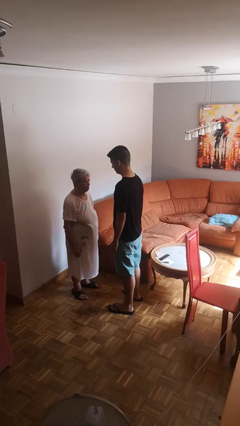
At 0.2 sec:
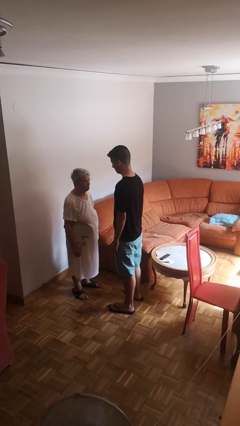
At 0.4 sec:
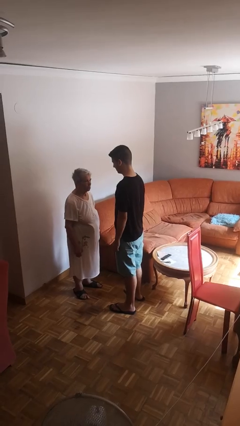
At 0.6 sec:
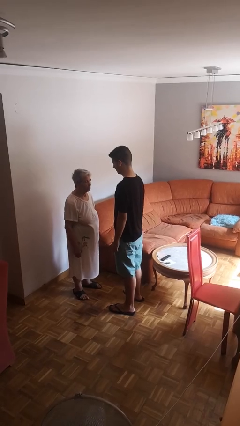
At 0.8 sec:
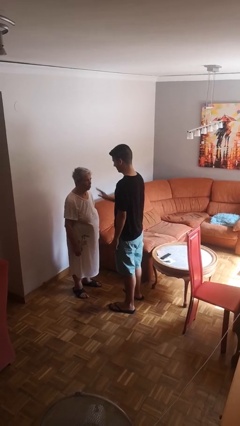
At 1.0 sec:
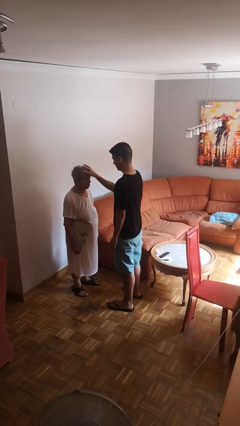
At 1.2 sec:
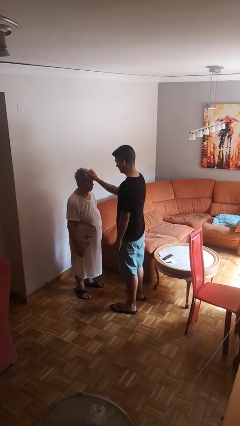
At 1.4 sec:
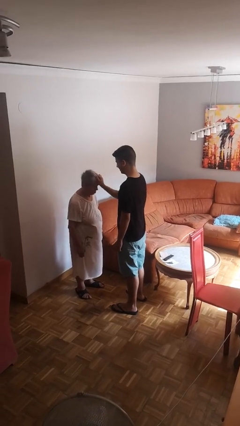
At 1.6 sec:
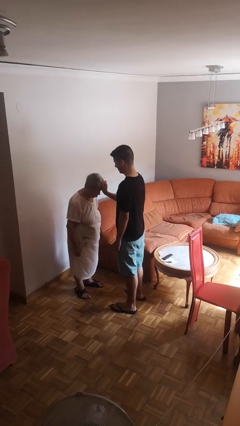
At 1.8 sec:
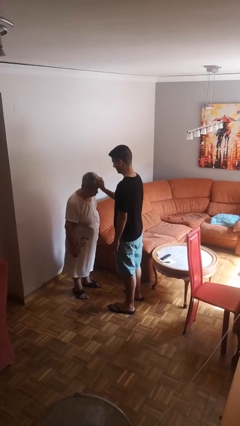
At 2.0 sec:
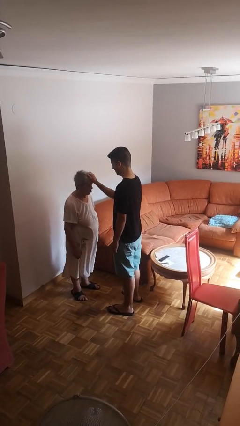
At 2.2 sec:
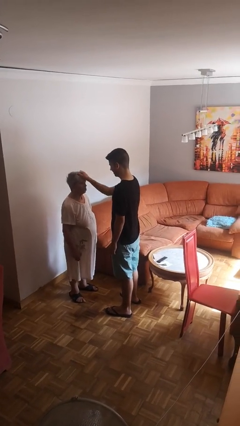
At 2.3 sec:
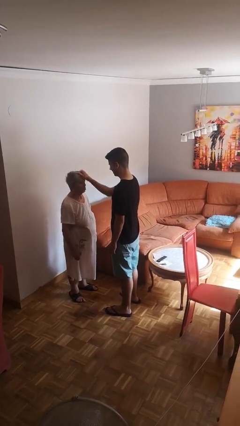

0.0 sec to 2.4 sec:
person grabs person by hair

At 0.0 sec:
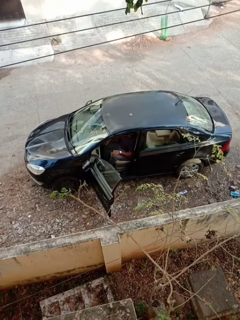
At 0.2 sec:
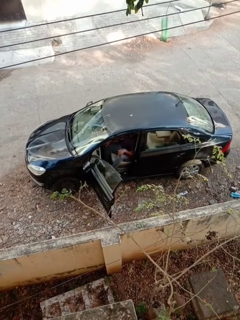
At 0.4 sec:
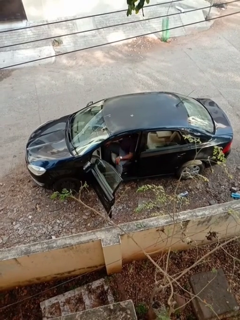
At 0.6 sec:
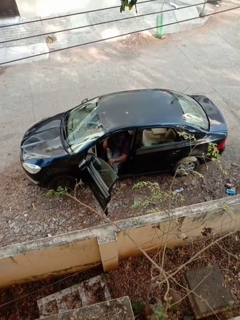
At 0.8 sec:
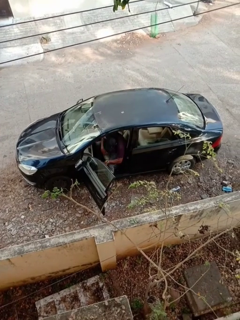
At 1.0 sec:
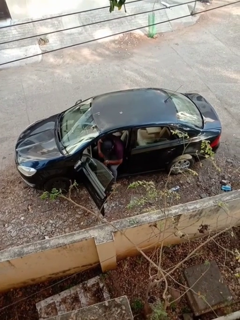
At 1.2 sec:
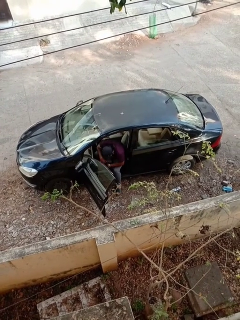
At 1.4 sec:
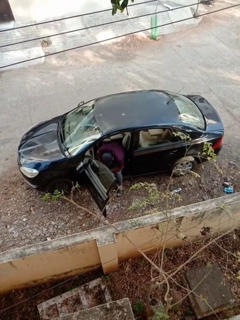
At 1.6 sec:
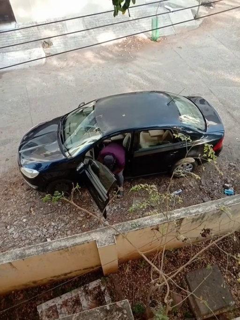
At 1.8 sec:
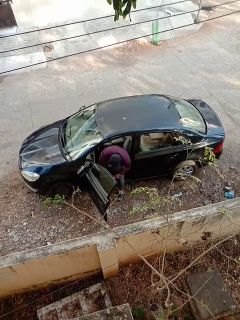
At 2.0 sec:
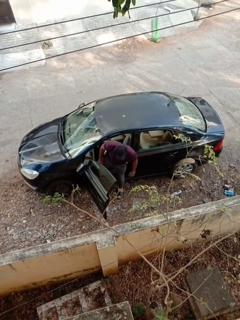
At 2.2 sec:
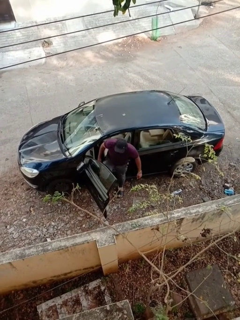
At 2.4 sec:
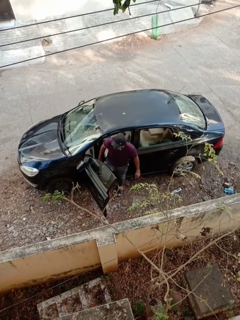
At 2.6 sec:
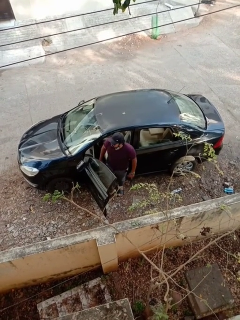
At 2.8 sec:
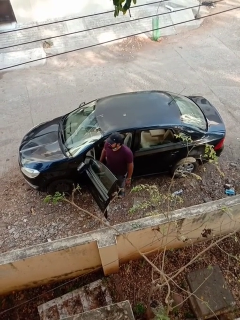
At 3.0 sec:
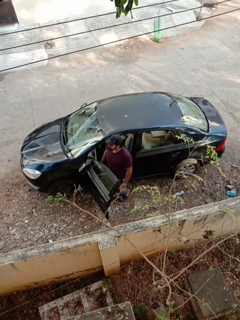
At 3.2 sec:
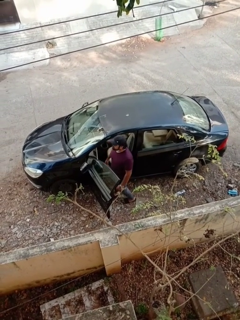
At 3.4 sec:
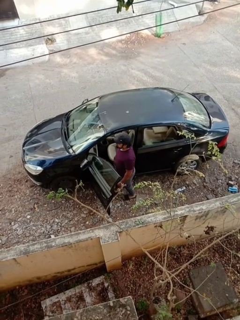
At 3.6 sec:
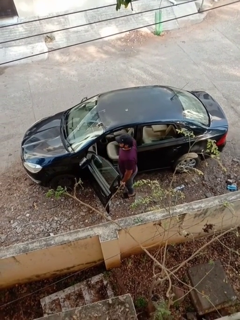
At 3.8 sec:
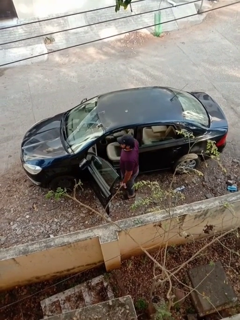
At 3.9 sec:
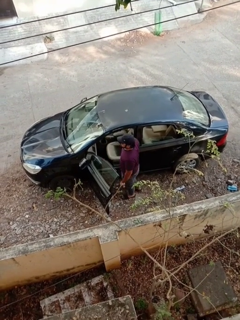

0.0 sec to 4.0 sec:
person exits car

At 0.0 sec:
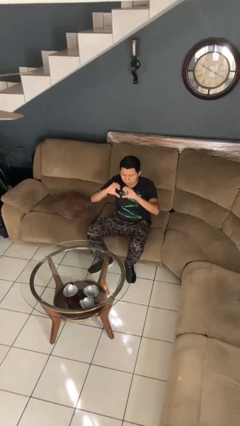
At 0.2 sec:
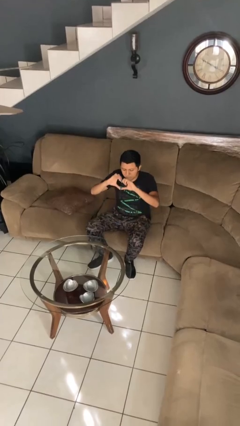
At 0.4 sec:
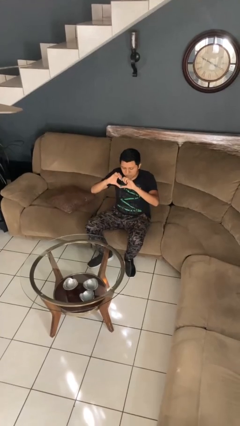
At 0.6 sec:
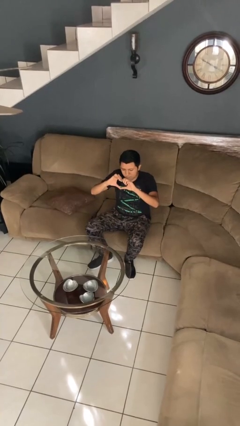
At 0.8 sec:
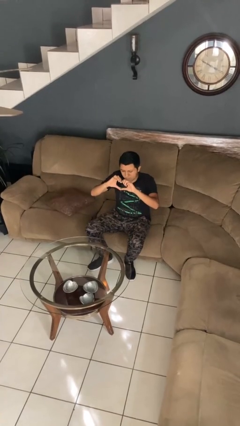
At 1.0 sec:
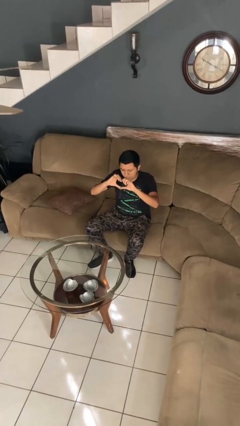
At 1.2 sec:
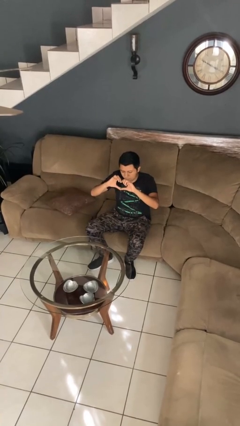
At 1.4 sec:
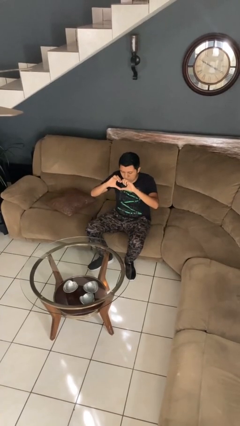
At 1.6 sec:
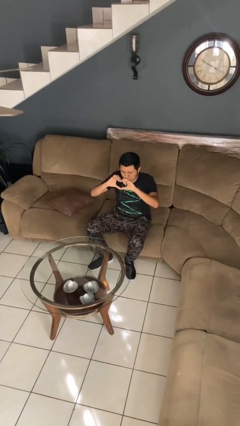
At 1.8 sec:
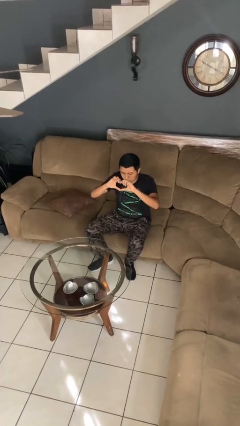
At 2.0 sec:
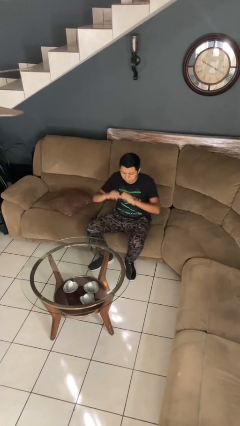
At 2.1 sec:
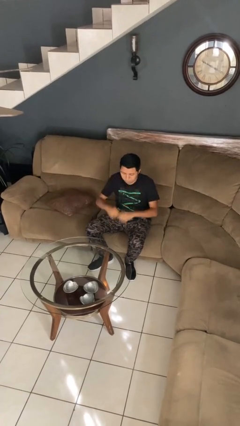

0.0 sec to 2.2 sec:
person gestures heart

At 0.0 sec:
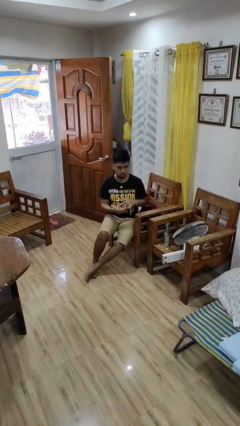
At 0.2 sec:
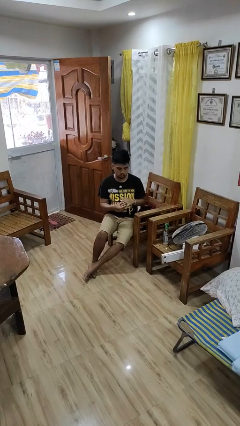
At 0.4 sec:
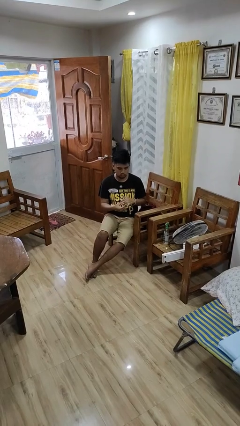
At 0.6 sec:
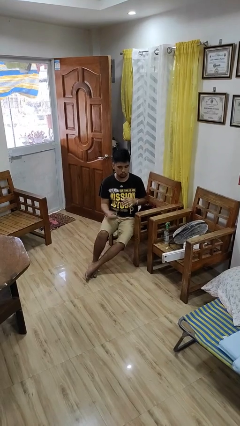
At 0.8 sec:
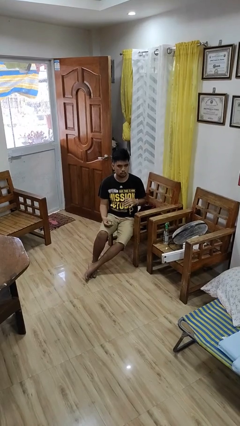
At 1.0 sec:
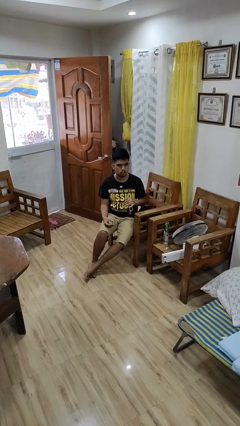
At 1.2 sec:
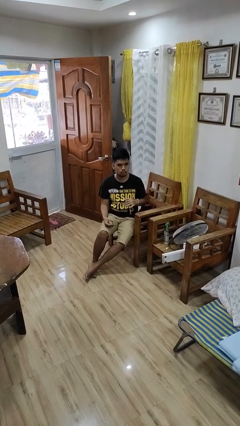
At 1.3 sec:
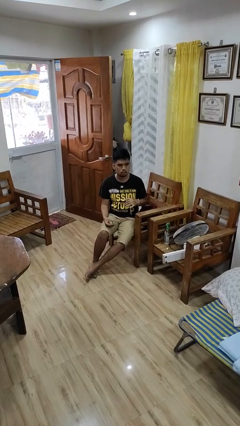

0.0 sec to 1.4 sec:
person takes off ring

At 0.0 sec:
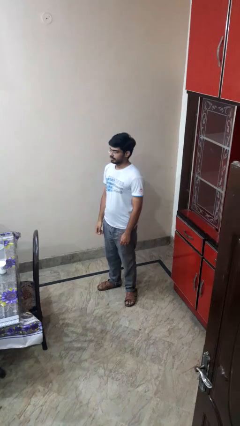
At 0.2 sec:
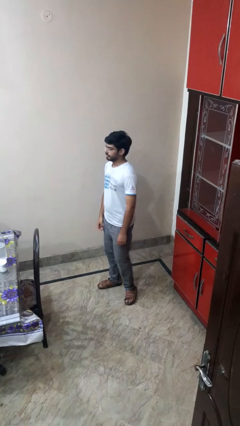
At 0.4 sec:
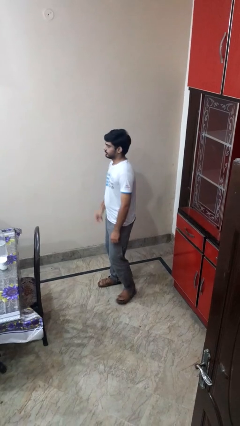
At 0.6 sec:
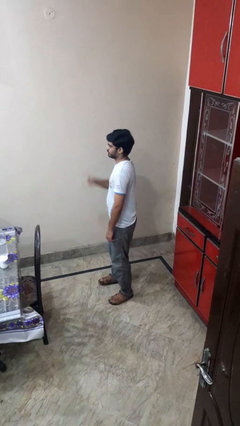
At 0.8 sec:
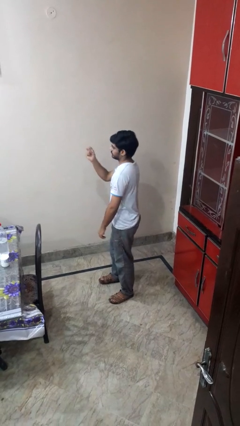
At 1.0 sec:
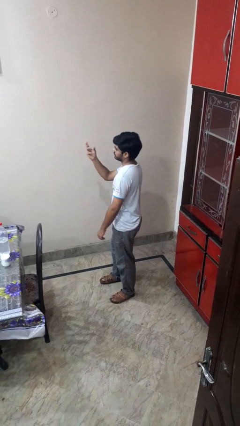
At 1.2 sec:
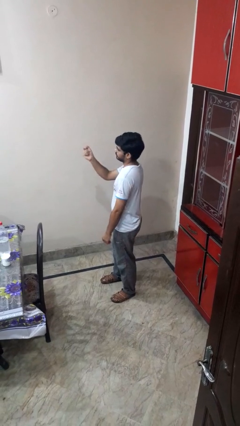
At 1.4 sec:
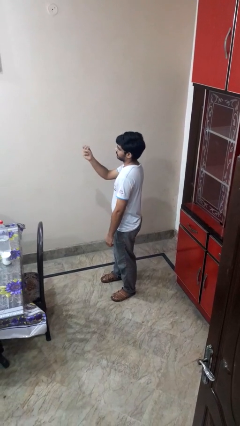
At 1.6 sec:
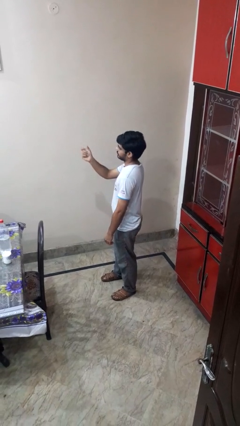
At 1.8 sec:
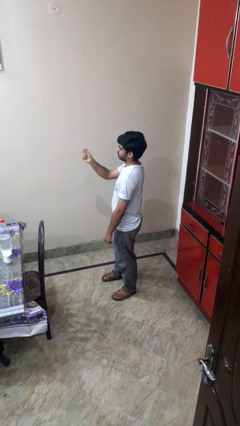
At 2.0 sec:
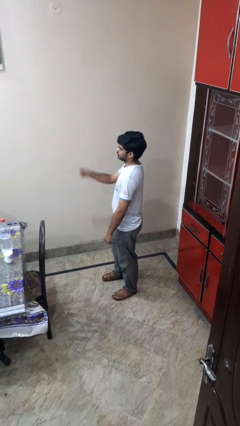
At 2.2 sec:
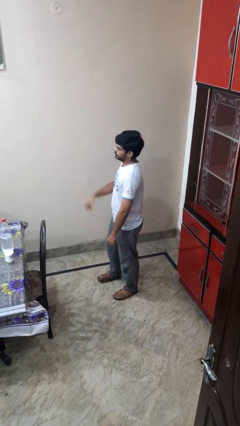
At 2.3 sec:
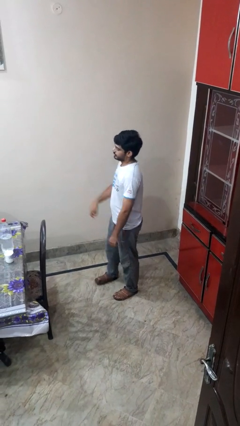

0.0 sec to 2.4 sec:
person snaps fingers

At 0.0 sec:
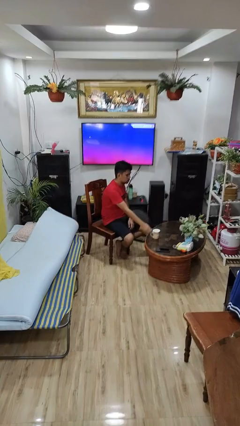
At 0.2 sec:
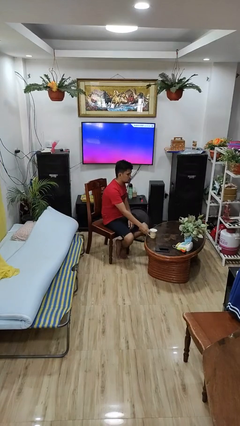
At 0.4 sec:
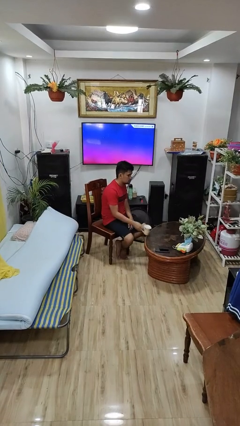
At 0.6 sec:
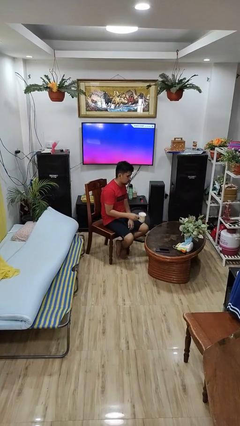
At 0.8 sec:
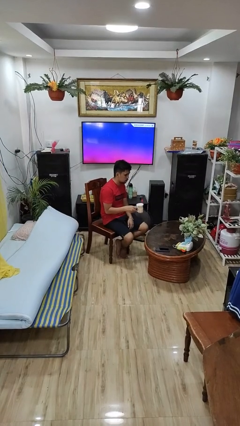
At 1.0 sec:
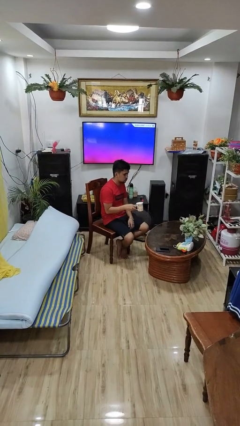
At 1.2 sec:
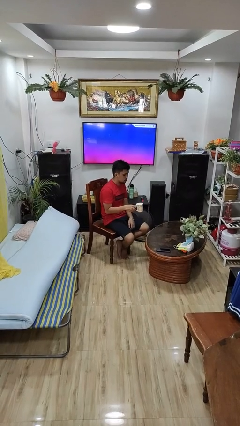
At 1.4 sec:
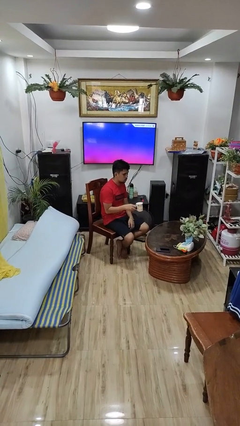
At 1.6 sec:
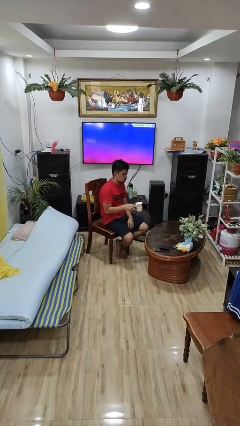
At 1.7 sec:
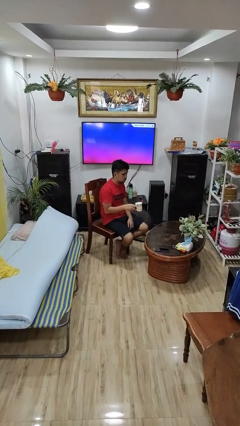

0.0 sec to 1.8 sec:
person picks up object from table

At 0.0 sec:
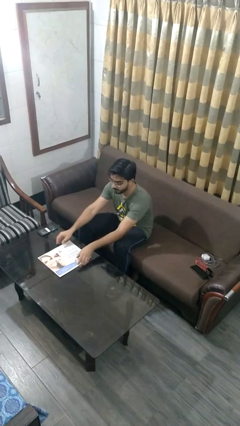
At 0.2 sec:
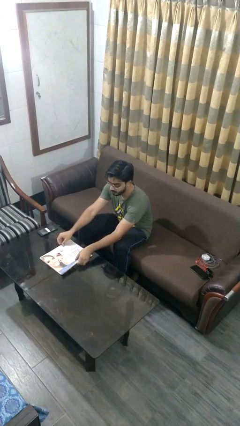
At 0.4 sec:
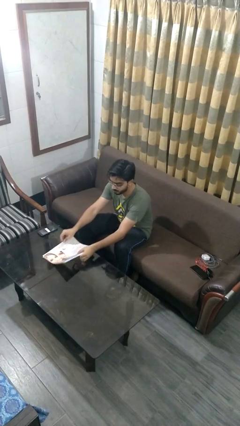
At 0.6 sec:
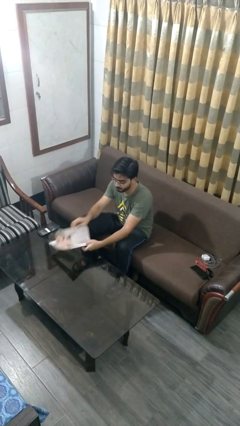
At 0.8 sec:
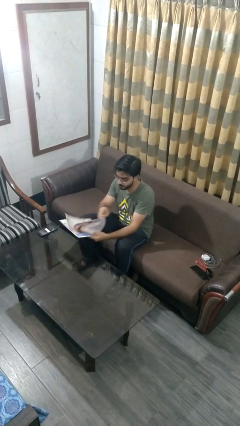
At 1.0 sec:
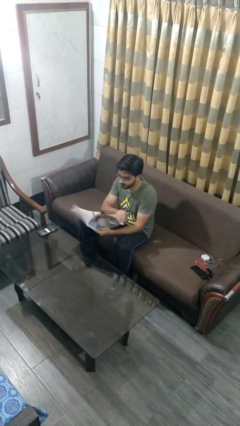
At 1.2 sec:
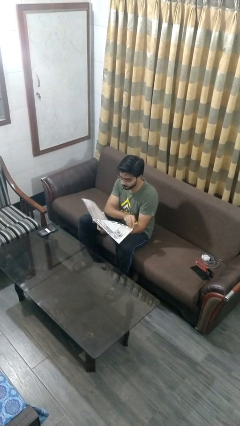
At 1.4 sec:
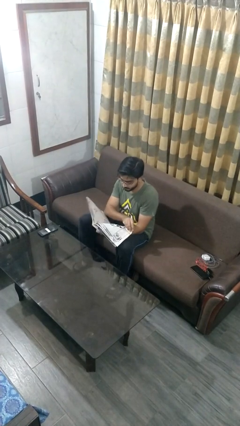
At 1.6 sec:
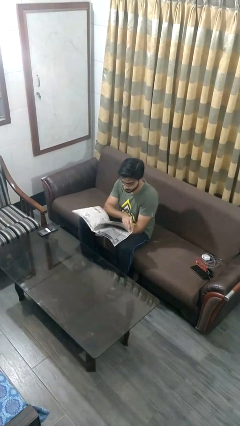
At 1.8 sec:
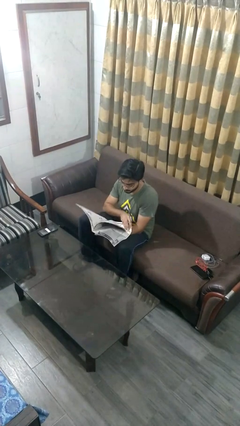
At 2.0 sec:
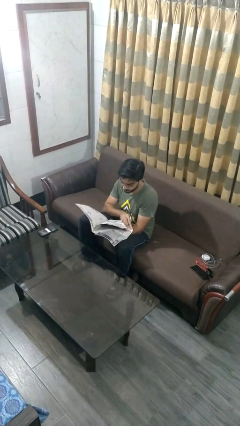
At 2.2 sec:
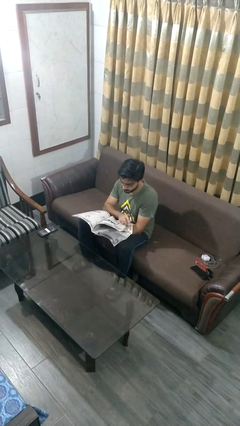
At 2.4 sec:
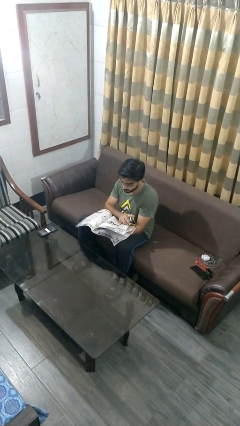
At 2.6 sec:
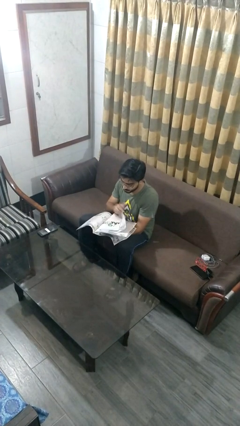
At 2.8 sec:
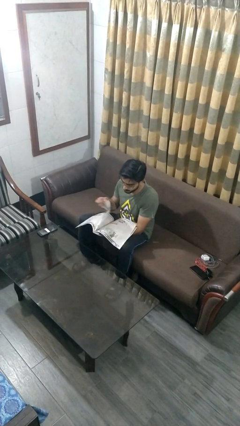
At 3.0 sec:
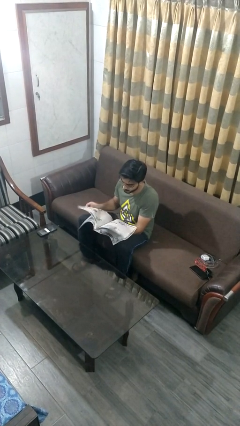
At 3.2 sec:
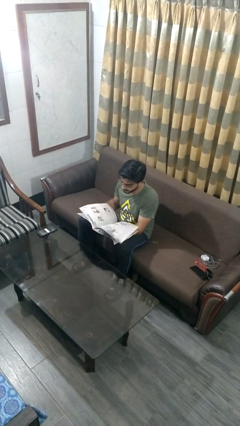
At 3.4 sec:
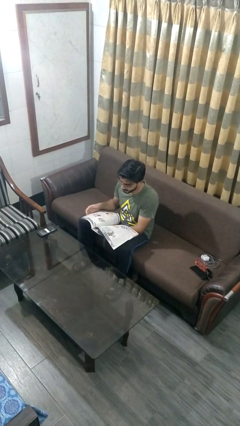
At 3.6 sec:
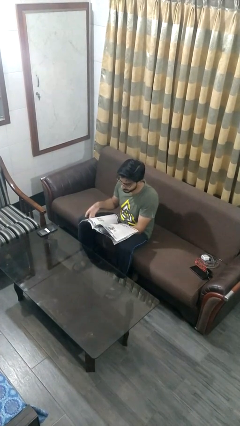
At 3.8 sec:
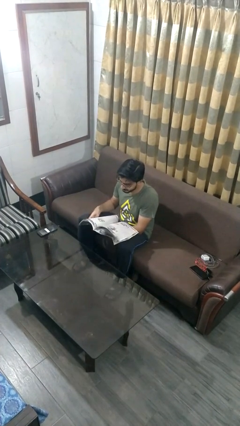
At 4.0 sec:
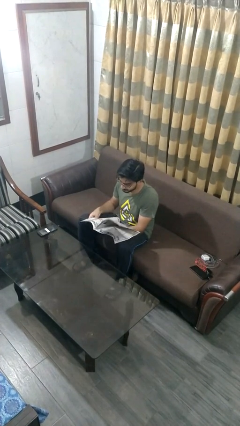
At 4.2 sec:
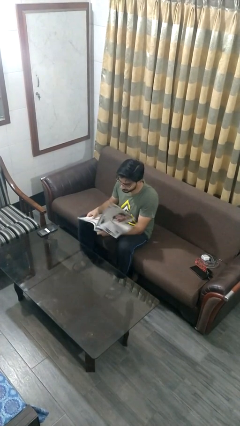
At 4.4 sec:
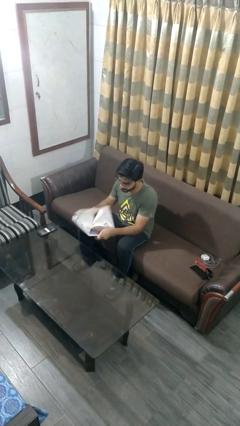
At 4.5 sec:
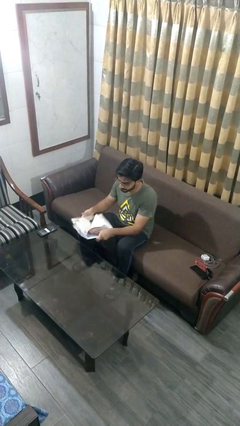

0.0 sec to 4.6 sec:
person reads magazine
